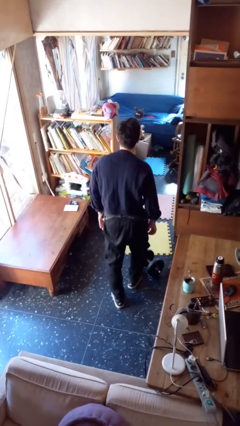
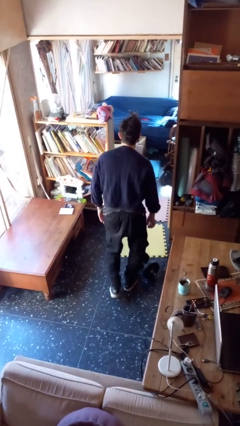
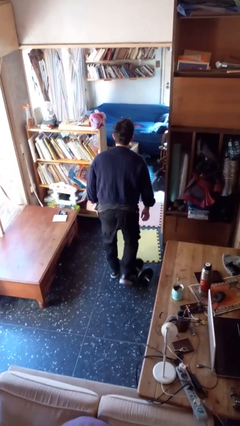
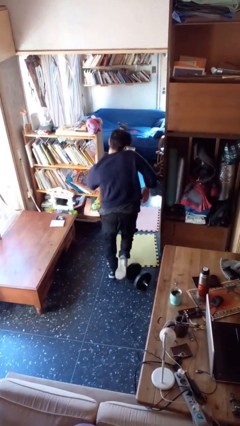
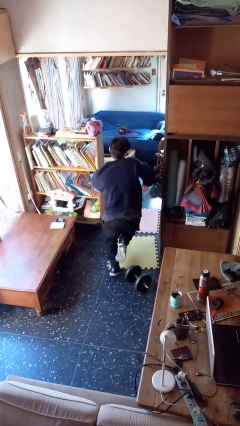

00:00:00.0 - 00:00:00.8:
person trips on object on floor

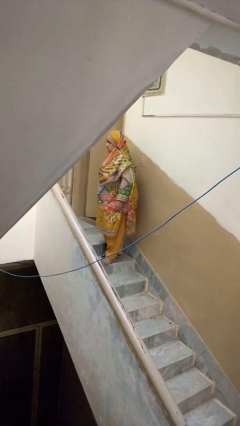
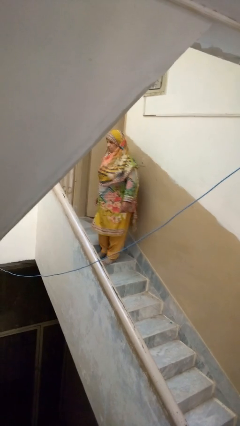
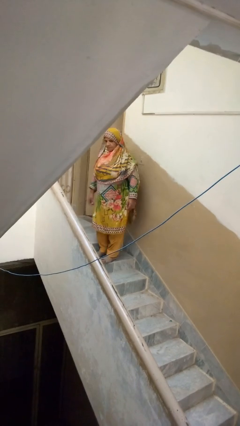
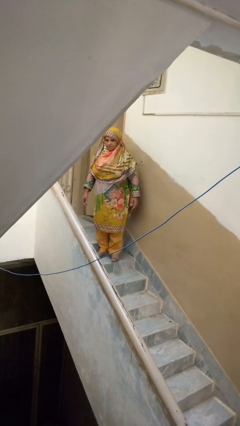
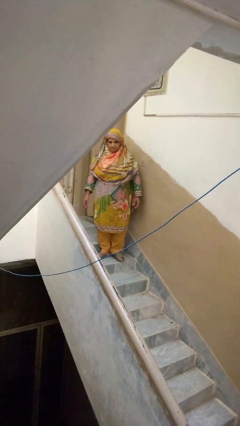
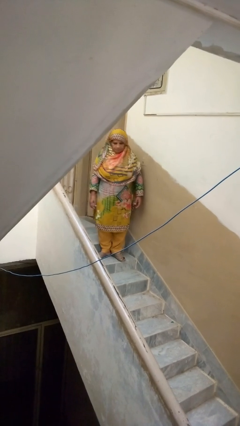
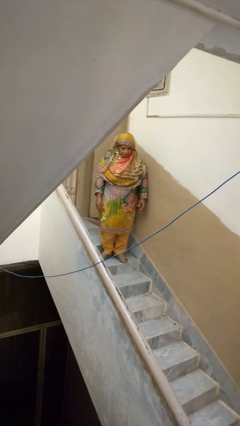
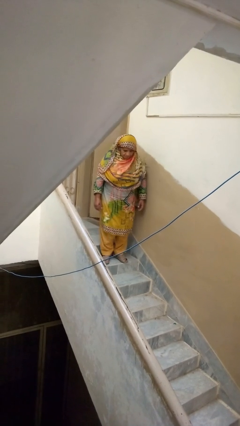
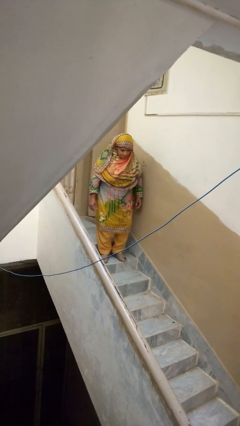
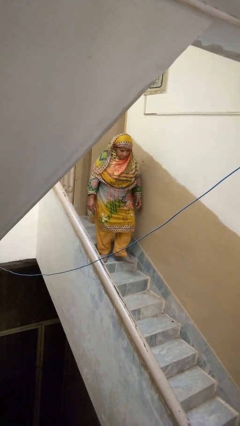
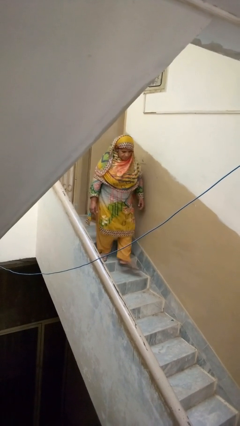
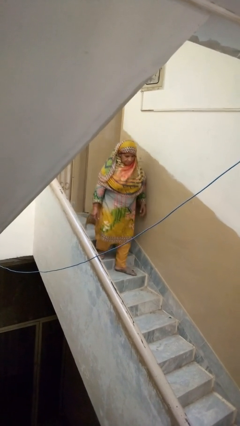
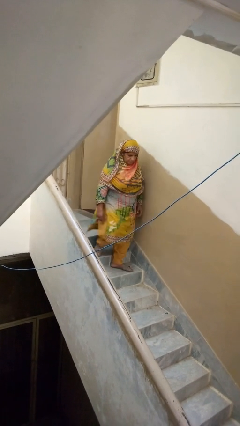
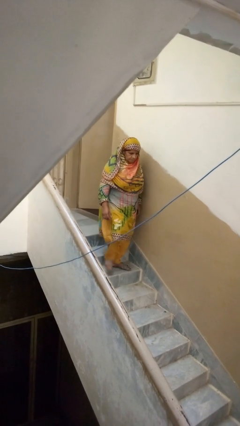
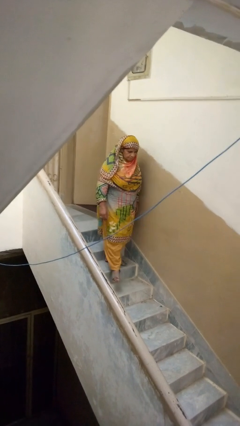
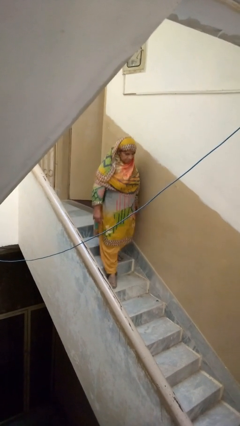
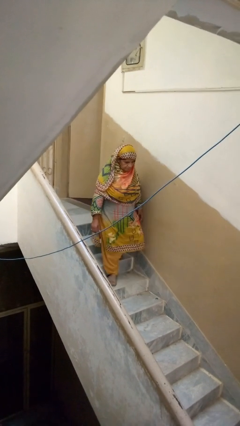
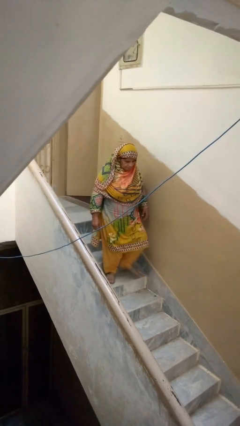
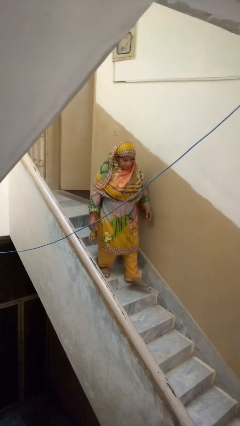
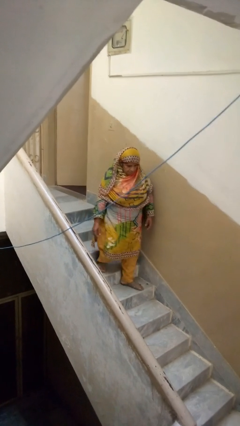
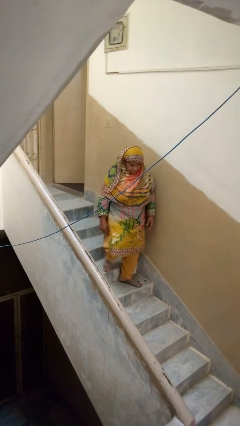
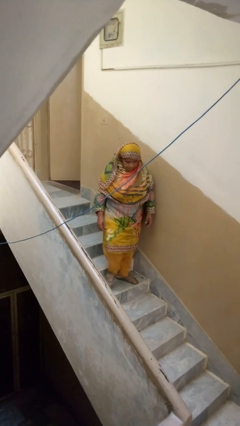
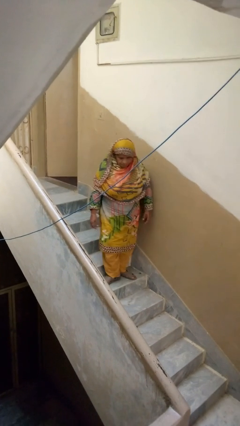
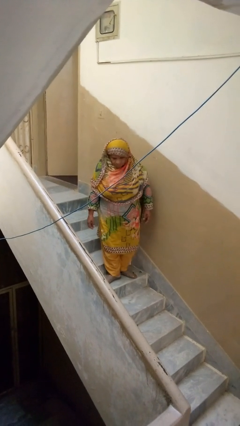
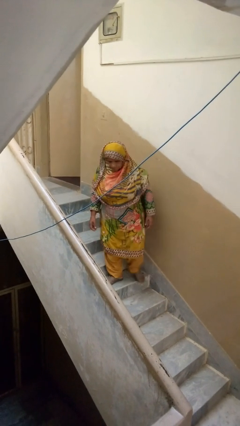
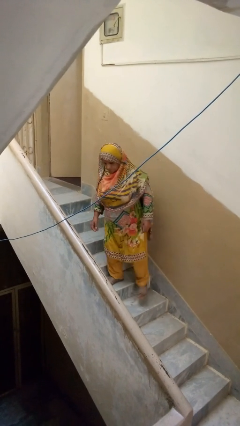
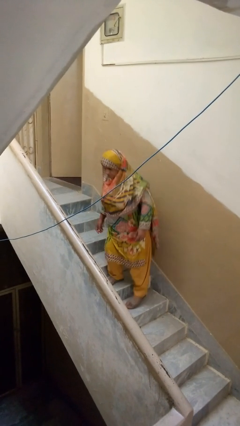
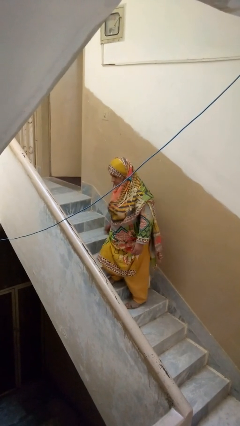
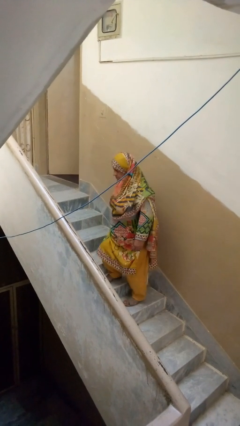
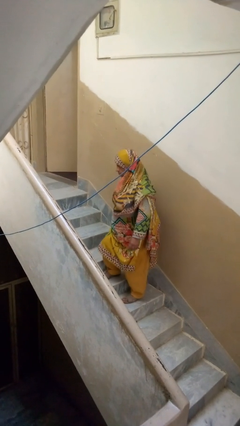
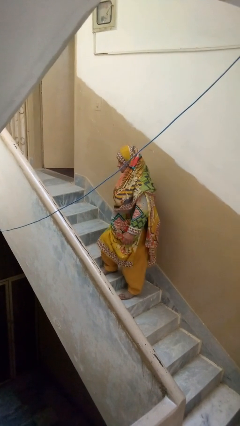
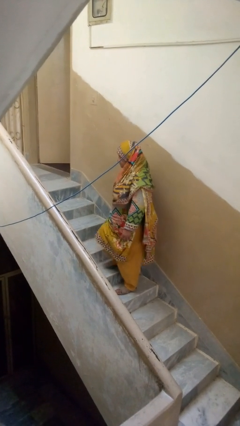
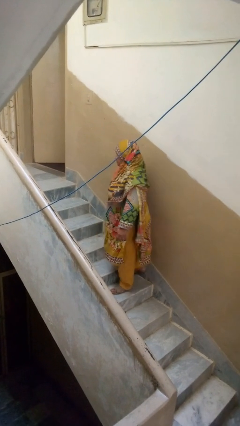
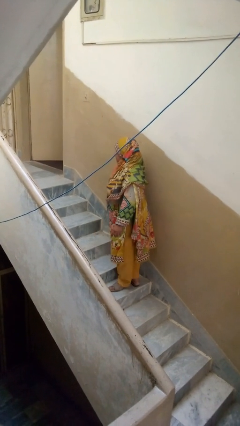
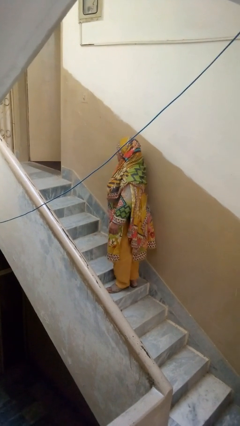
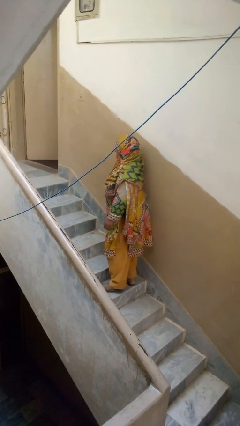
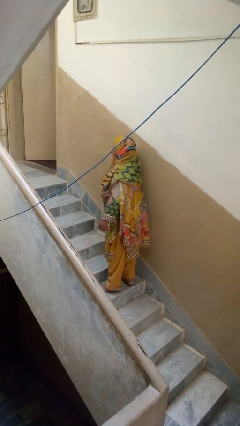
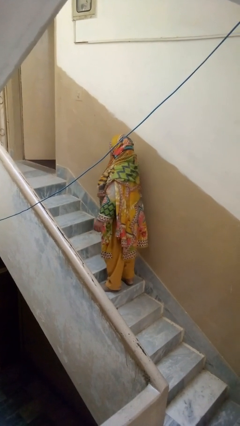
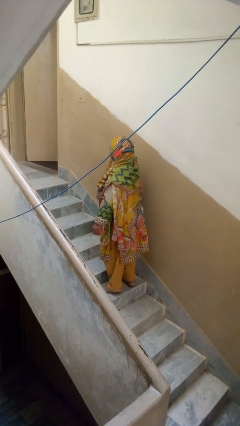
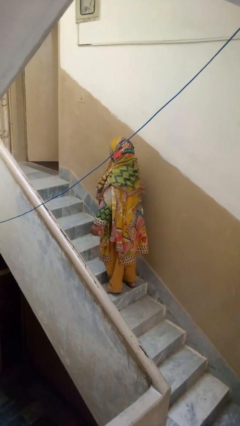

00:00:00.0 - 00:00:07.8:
person climbs down stairs

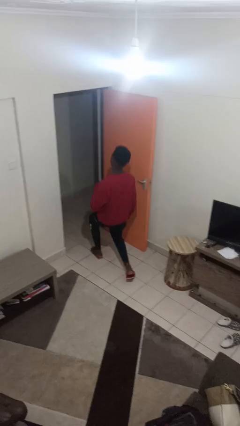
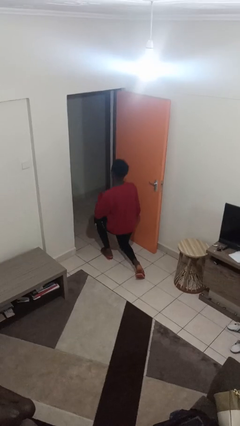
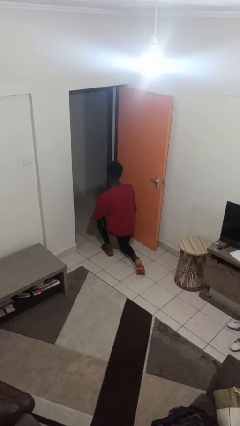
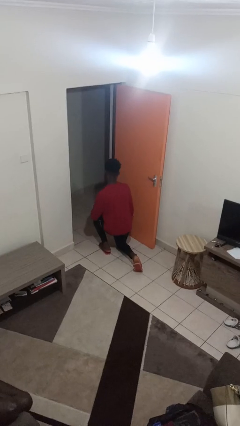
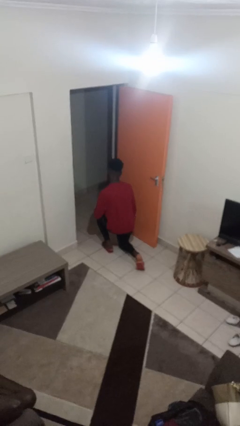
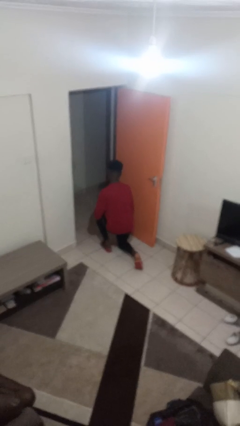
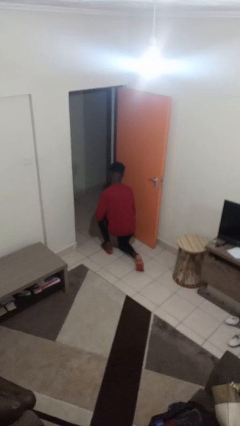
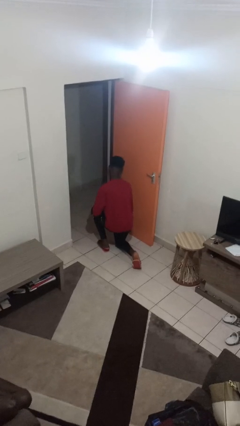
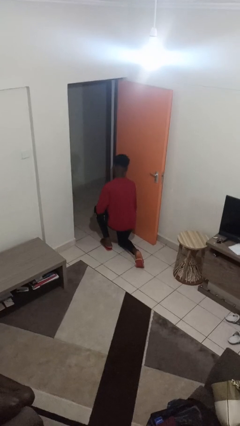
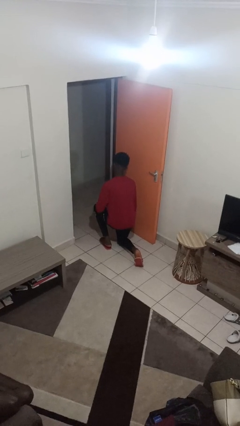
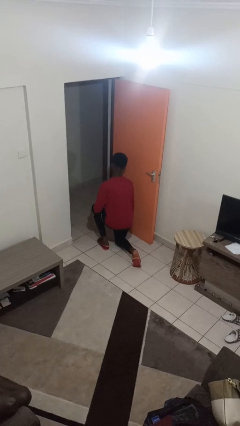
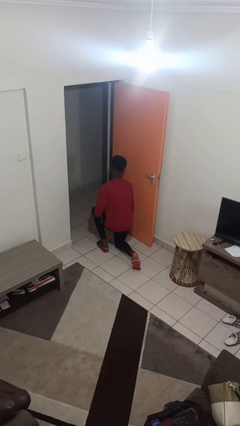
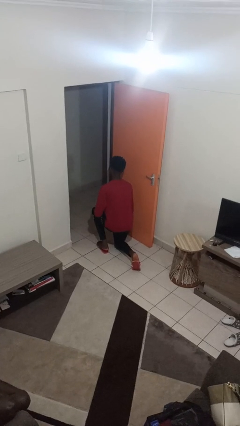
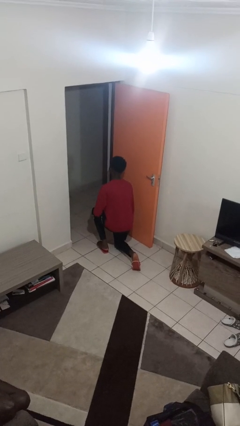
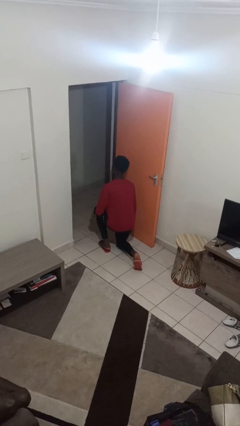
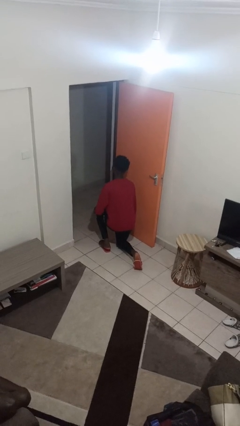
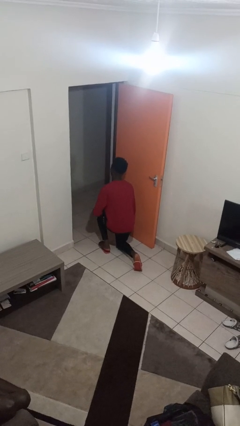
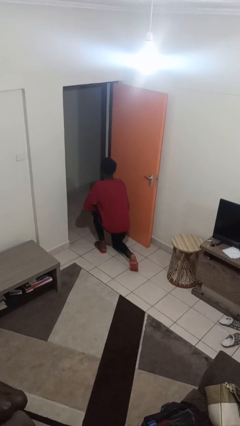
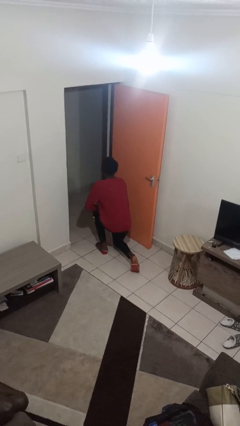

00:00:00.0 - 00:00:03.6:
person kneels

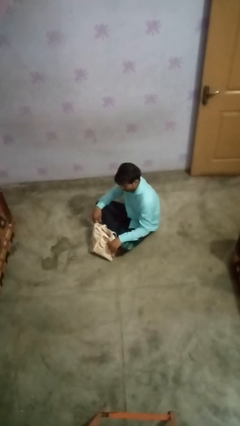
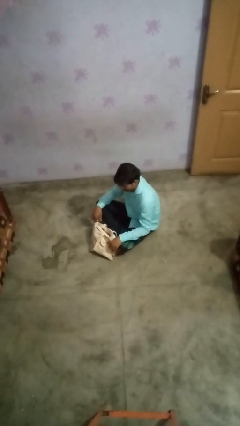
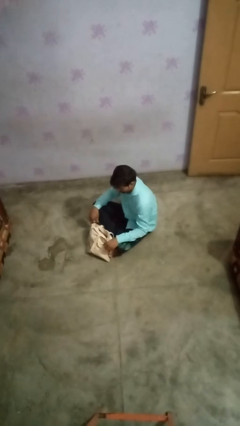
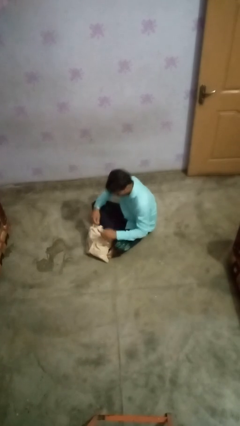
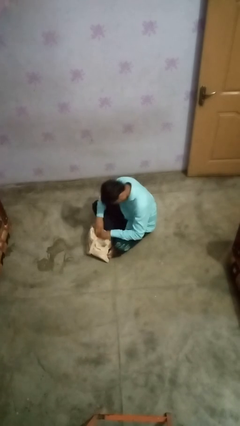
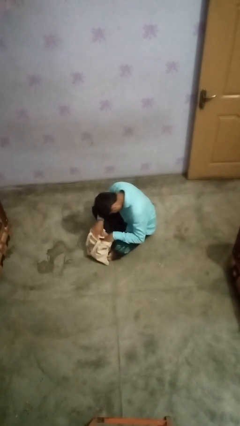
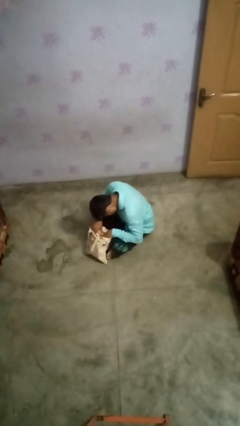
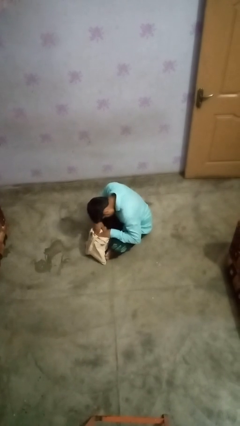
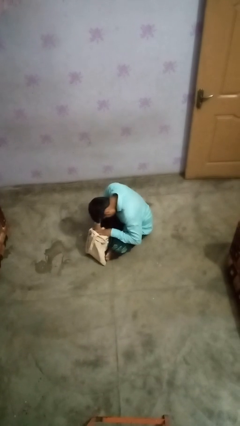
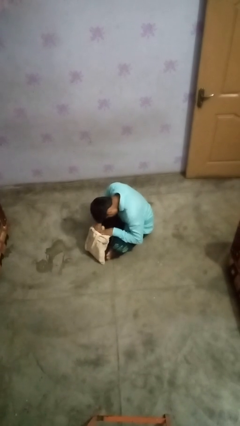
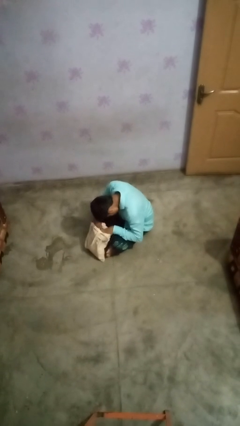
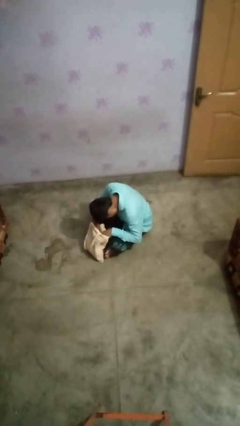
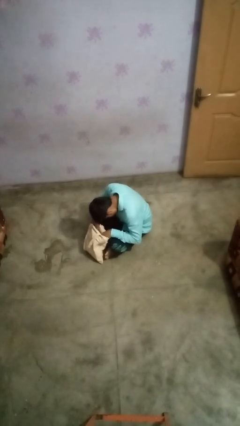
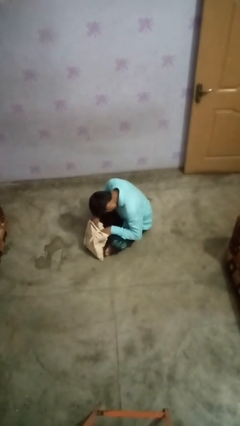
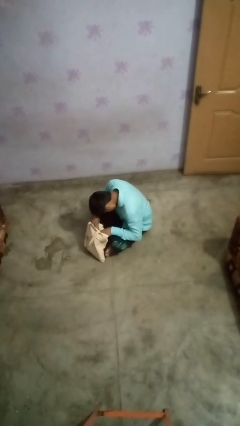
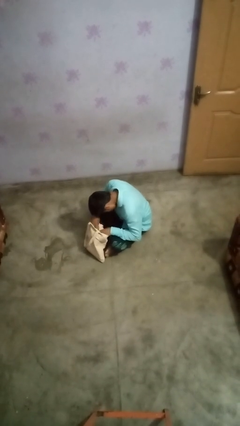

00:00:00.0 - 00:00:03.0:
person searches in bag

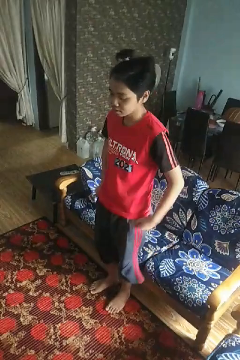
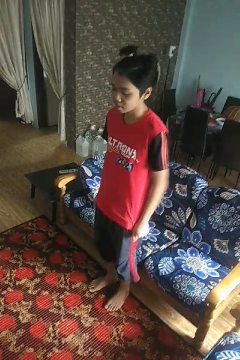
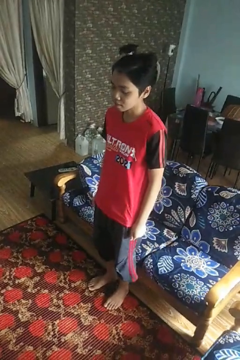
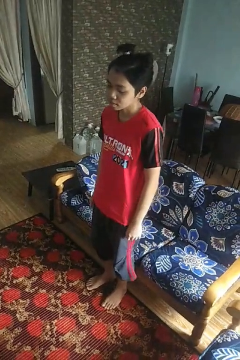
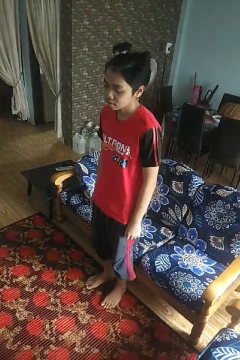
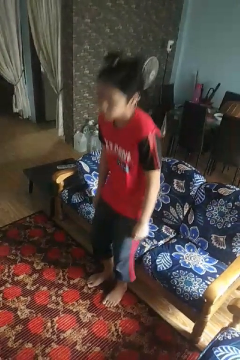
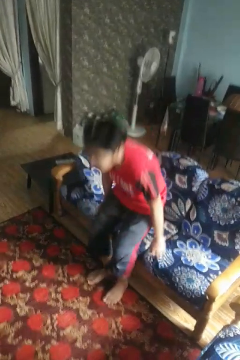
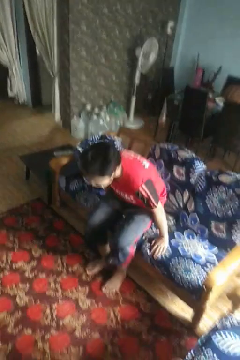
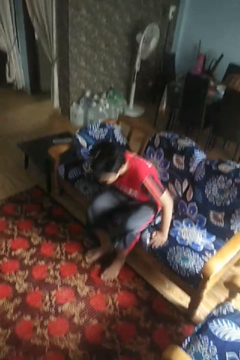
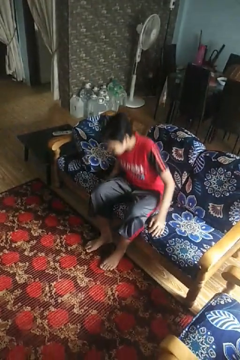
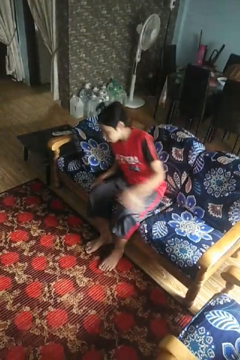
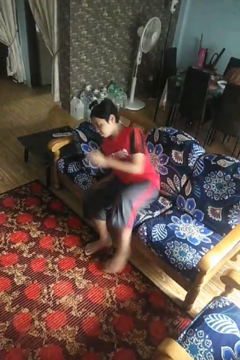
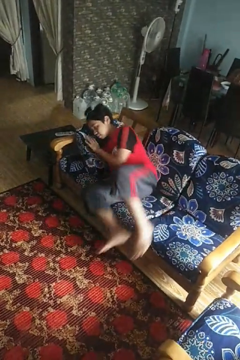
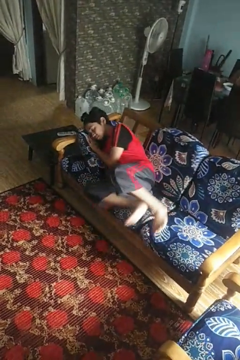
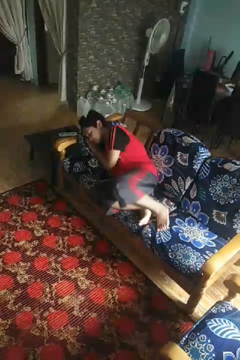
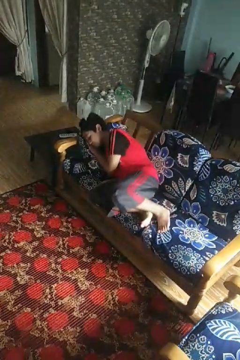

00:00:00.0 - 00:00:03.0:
person lies down on couch
